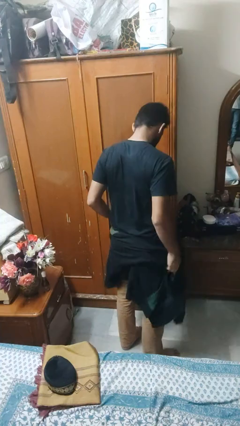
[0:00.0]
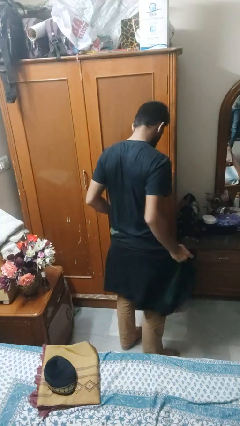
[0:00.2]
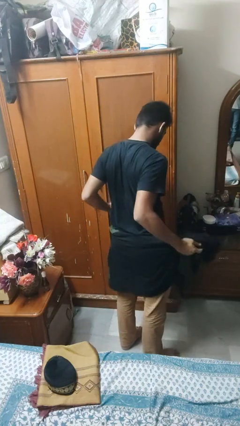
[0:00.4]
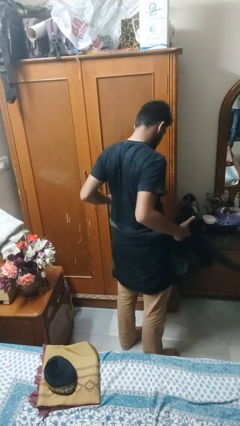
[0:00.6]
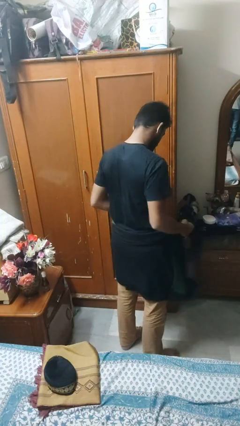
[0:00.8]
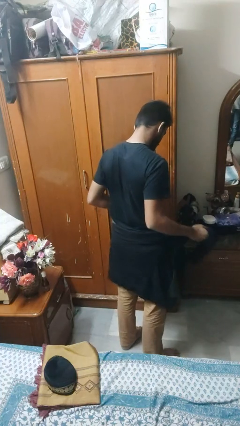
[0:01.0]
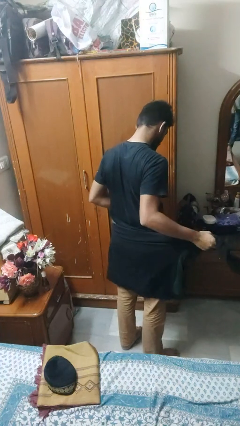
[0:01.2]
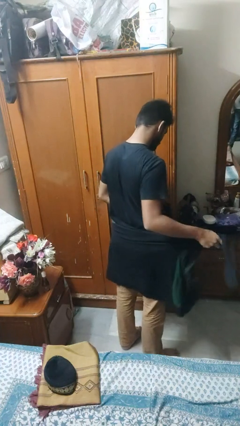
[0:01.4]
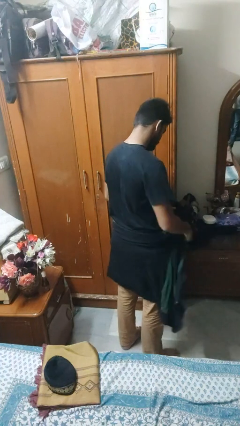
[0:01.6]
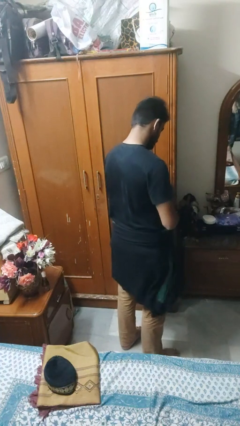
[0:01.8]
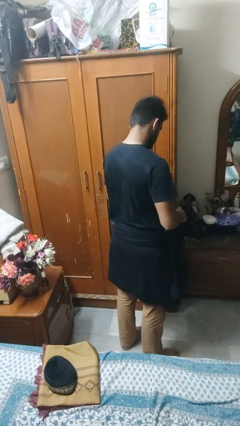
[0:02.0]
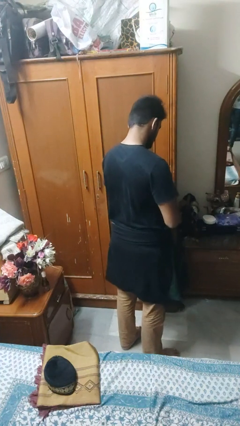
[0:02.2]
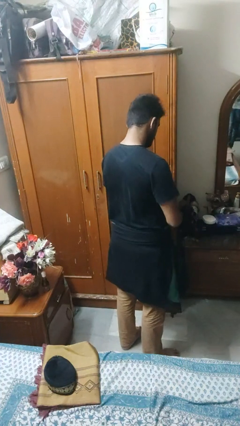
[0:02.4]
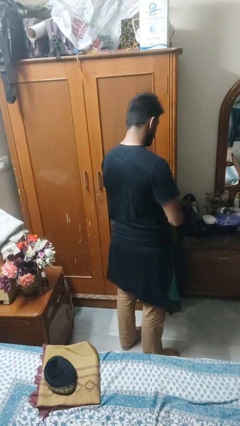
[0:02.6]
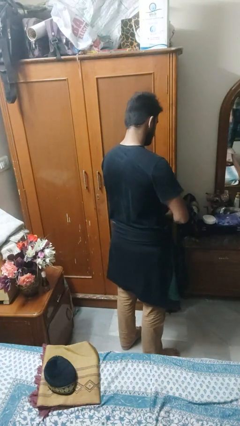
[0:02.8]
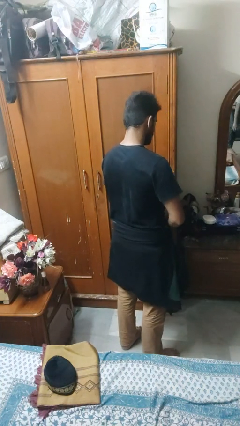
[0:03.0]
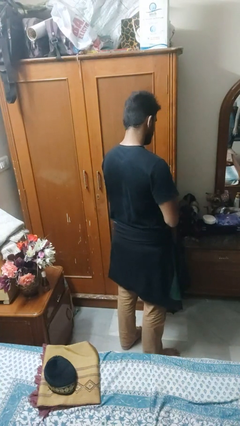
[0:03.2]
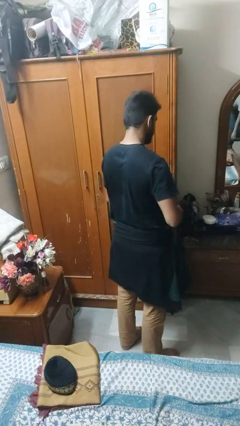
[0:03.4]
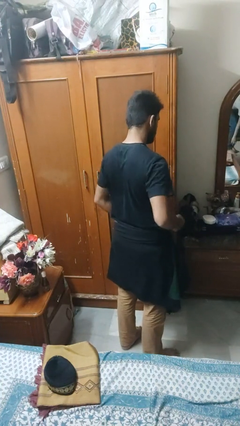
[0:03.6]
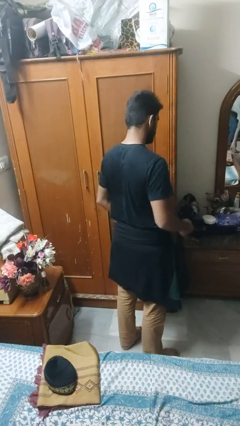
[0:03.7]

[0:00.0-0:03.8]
person ties jacket around waist

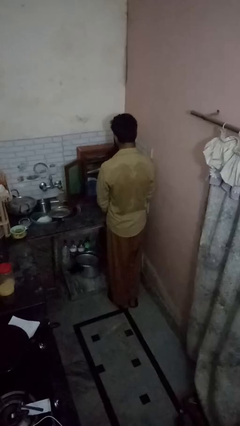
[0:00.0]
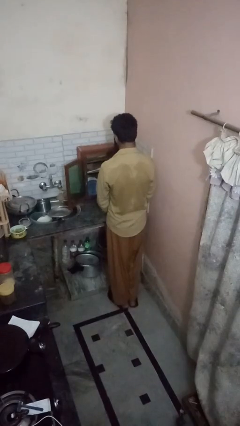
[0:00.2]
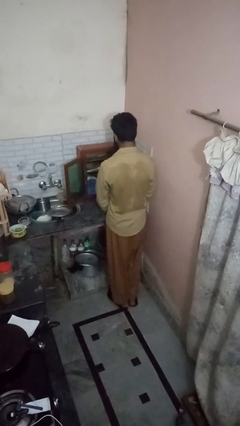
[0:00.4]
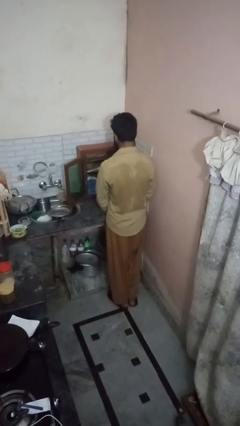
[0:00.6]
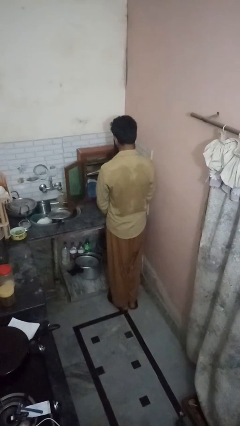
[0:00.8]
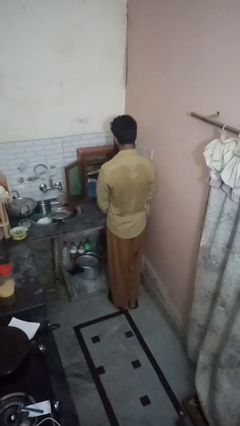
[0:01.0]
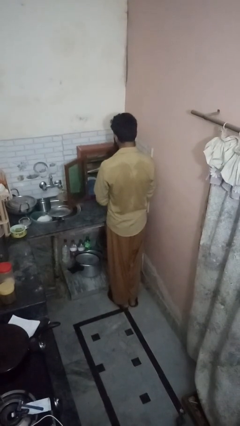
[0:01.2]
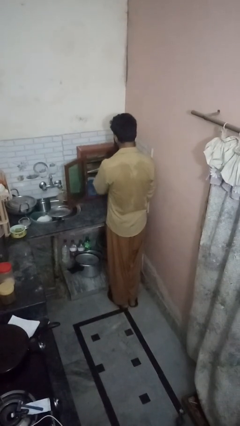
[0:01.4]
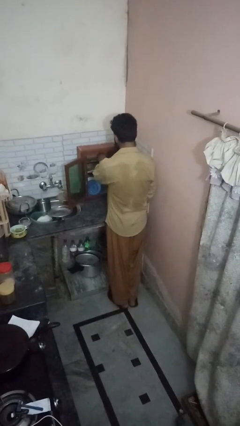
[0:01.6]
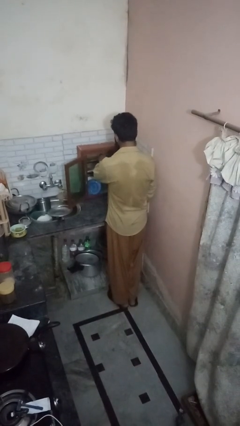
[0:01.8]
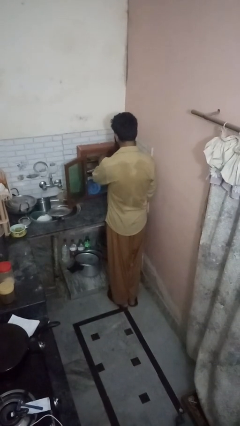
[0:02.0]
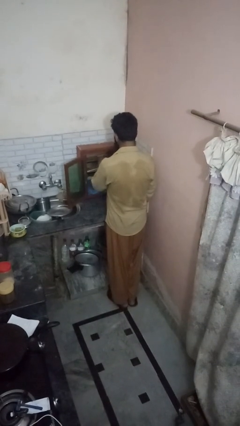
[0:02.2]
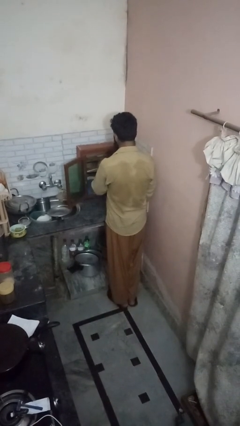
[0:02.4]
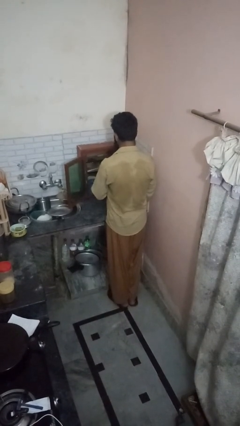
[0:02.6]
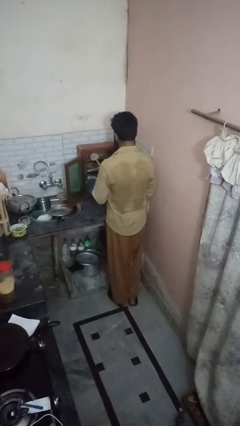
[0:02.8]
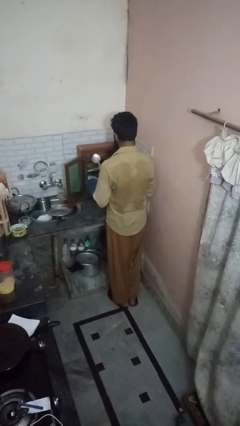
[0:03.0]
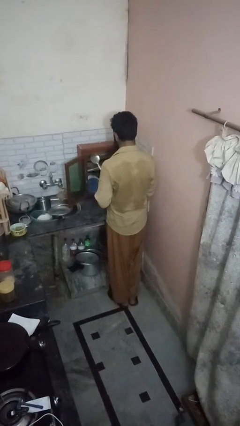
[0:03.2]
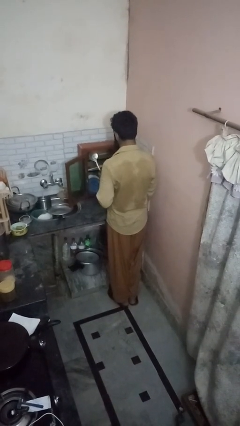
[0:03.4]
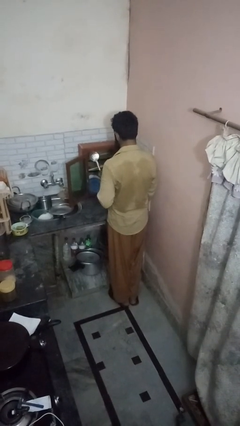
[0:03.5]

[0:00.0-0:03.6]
person puts object in cabinet

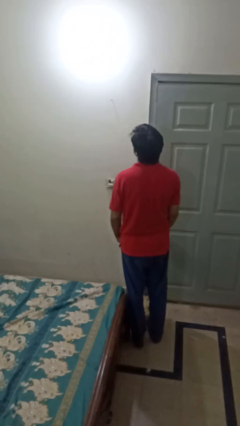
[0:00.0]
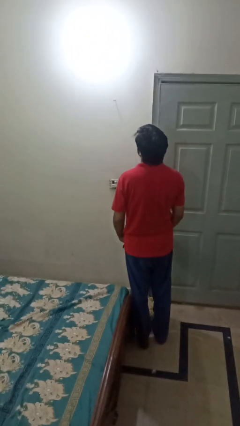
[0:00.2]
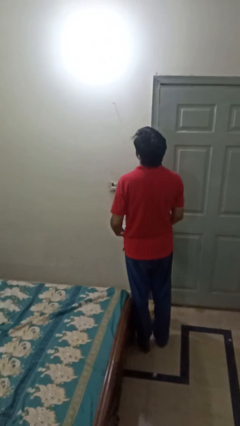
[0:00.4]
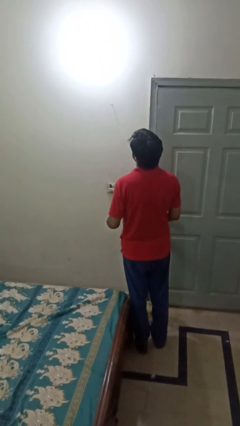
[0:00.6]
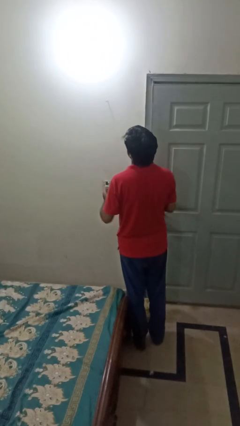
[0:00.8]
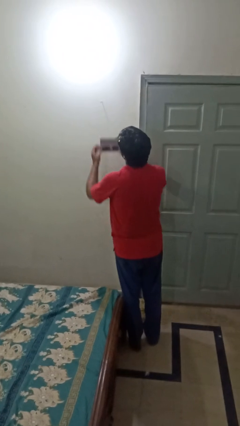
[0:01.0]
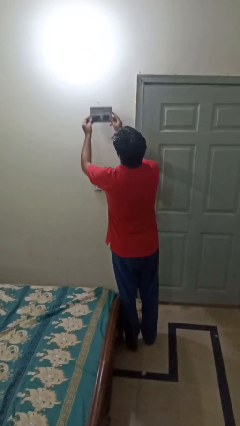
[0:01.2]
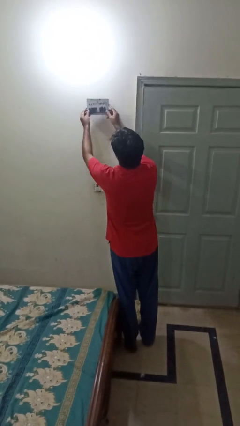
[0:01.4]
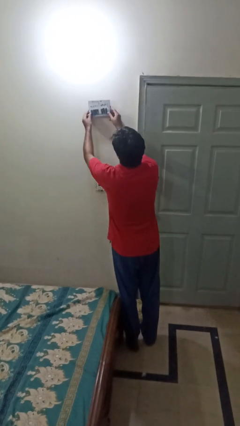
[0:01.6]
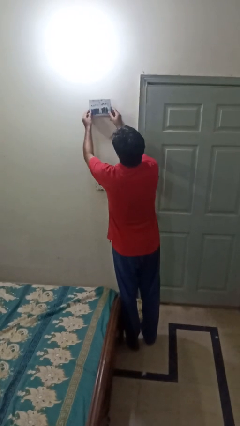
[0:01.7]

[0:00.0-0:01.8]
person puts up picture frame

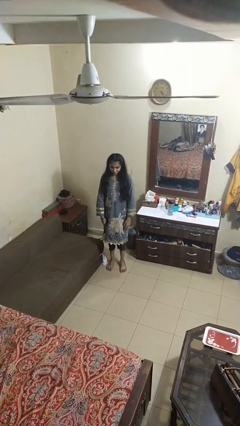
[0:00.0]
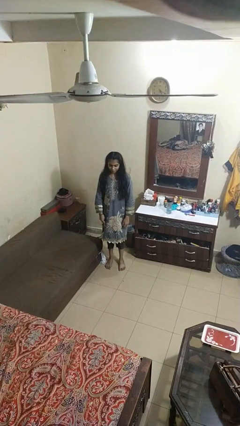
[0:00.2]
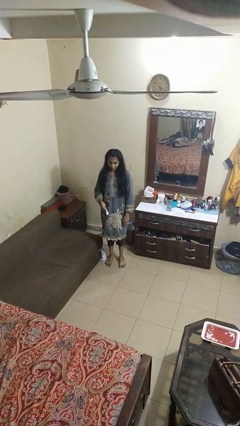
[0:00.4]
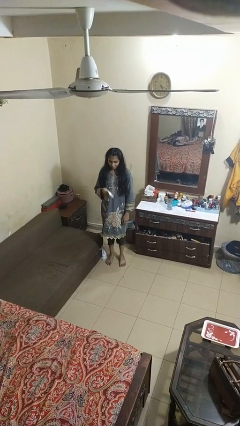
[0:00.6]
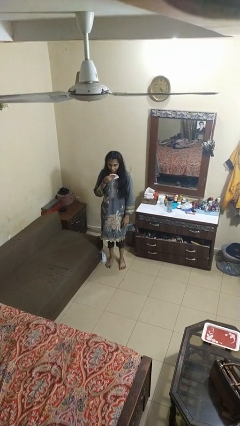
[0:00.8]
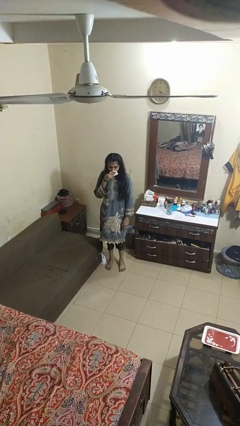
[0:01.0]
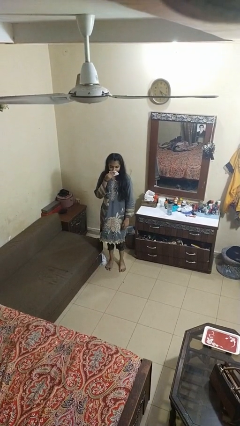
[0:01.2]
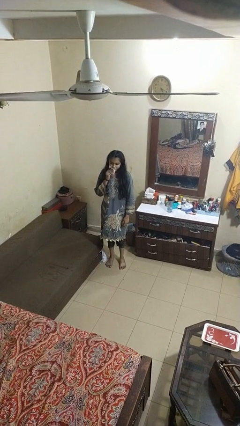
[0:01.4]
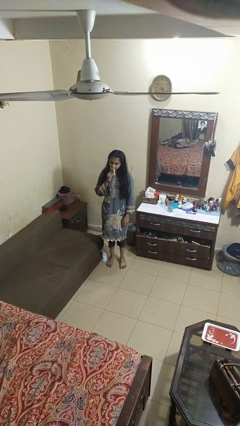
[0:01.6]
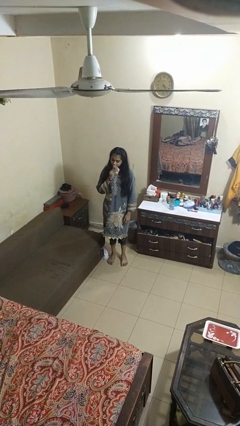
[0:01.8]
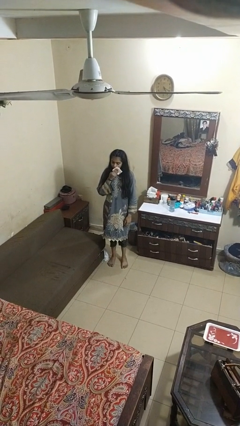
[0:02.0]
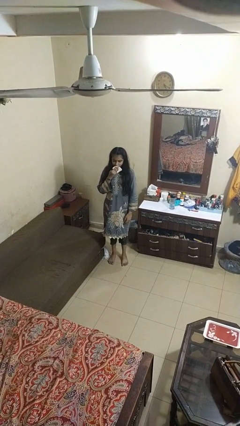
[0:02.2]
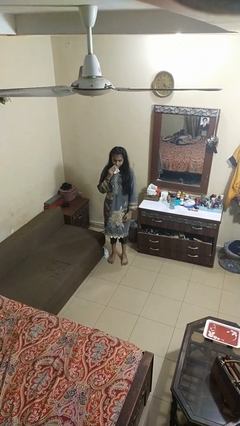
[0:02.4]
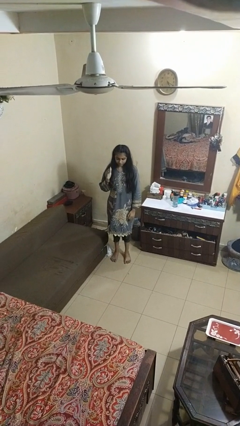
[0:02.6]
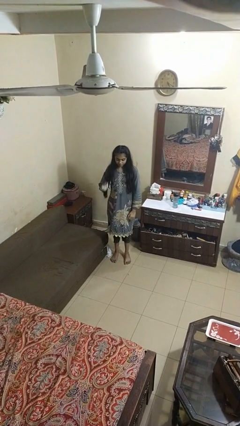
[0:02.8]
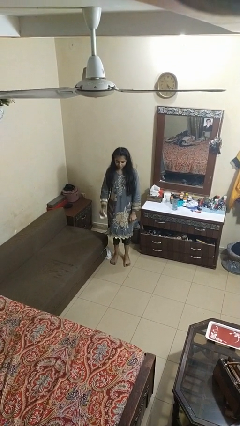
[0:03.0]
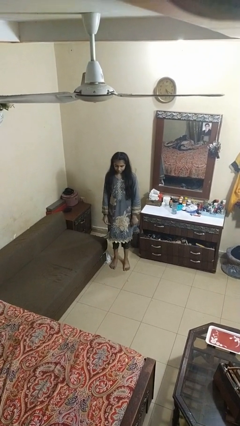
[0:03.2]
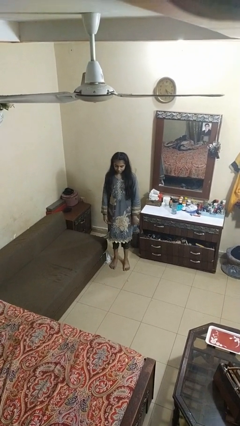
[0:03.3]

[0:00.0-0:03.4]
person wipes mouth with napkin

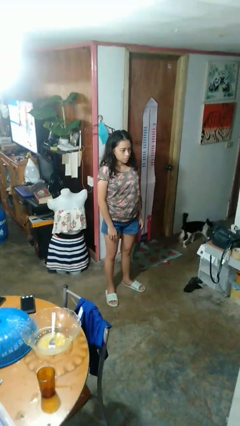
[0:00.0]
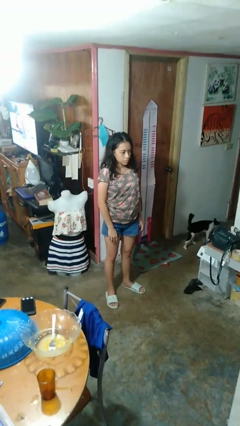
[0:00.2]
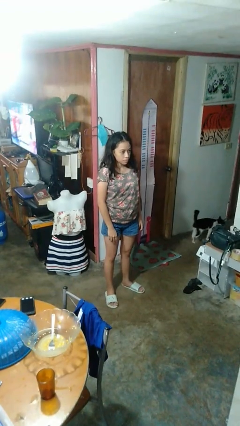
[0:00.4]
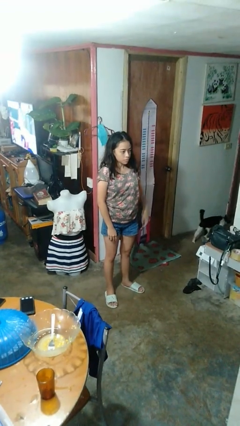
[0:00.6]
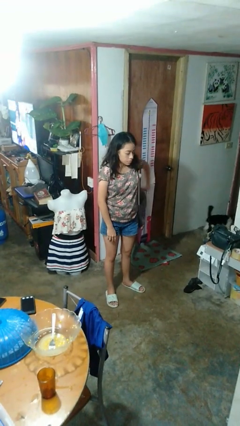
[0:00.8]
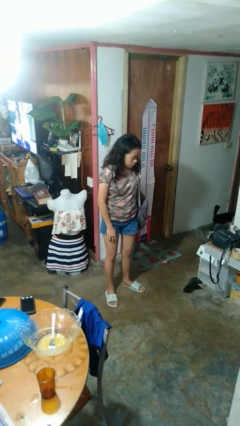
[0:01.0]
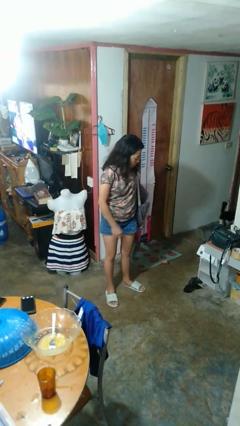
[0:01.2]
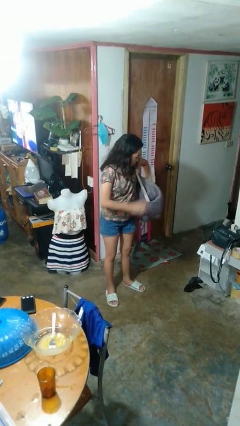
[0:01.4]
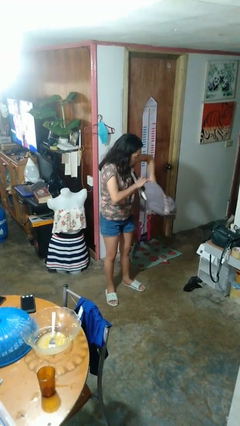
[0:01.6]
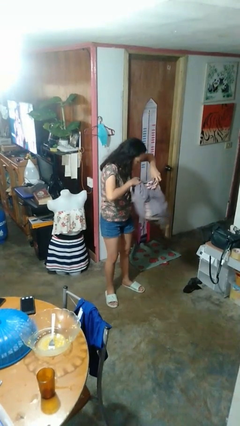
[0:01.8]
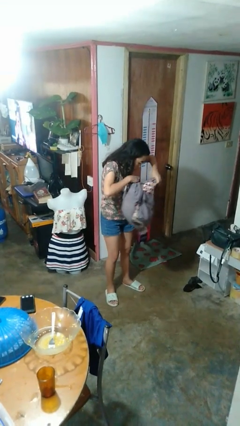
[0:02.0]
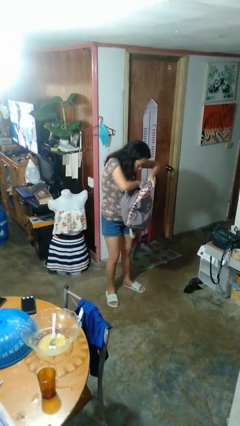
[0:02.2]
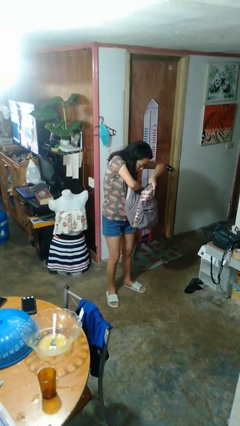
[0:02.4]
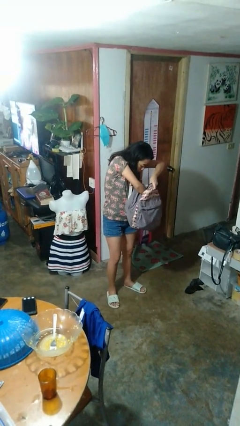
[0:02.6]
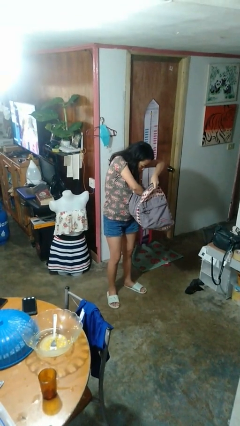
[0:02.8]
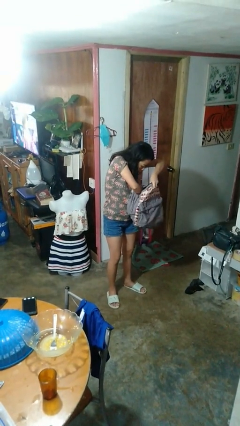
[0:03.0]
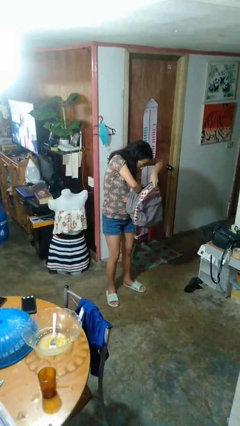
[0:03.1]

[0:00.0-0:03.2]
person searches in backpack

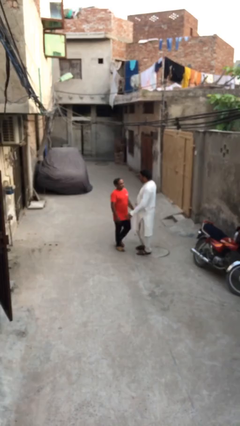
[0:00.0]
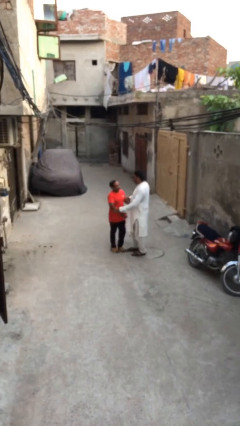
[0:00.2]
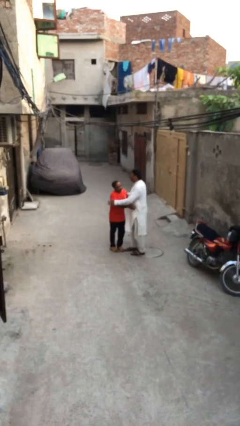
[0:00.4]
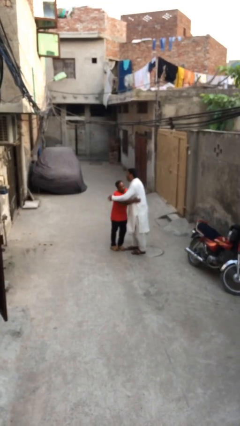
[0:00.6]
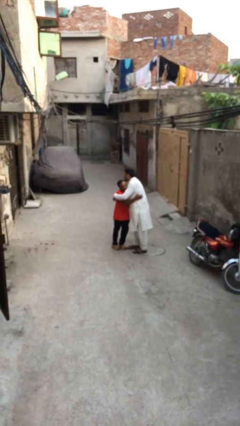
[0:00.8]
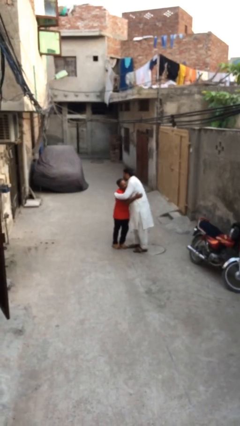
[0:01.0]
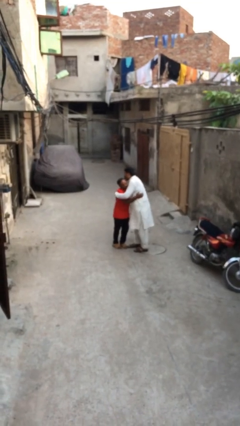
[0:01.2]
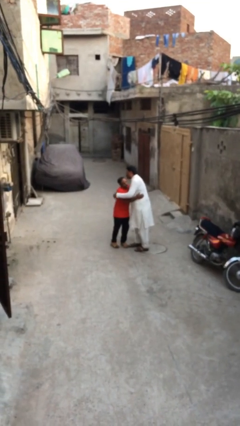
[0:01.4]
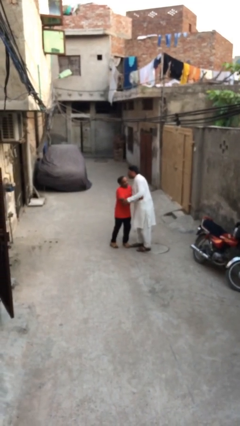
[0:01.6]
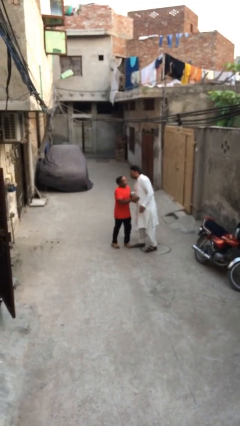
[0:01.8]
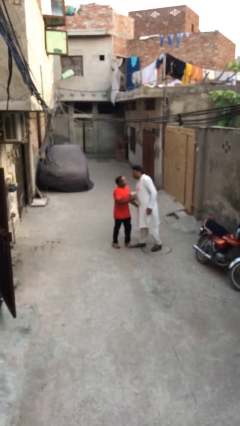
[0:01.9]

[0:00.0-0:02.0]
person embraces person
